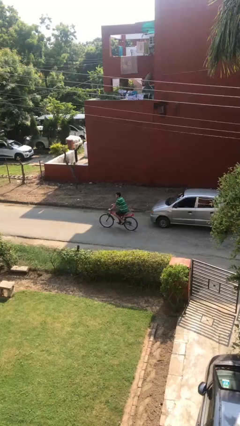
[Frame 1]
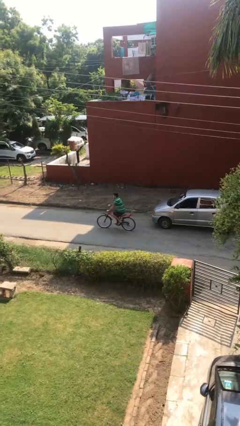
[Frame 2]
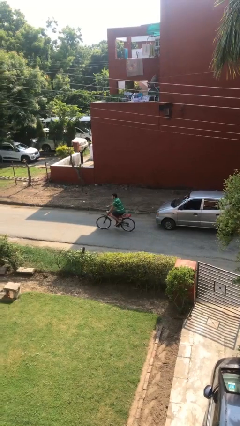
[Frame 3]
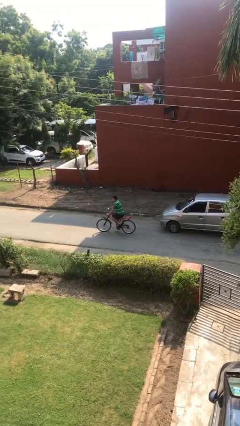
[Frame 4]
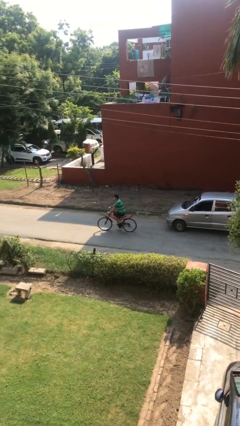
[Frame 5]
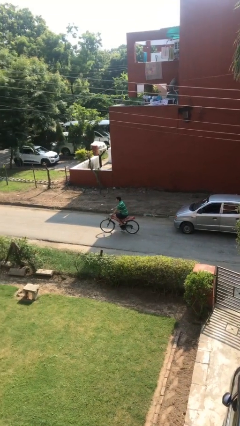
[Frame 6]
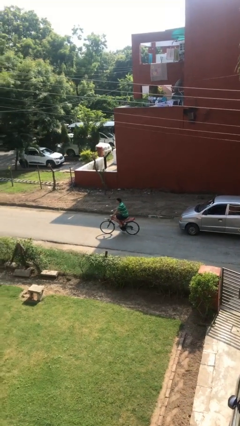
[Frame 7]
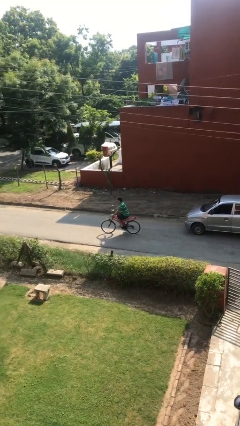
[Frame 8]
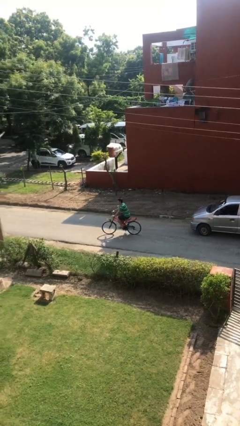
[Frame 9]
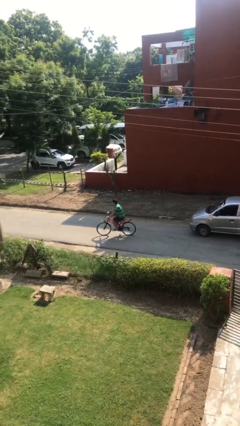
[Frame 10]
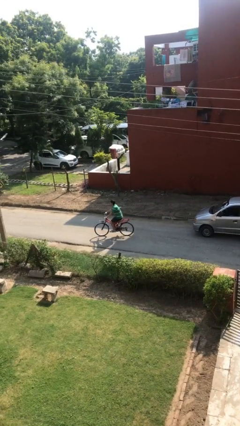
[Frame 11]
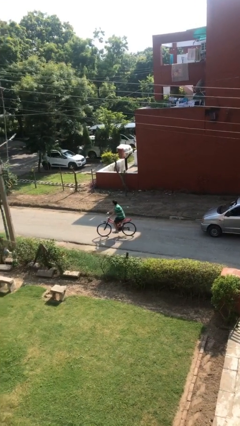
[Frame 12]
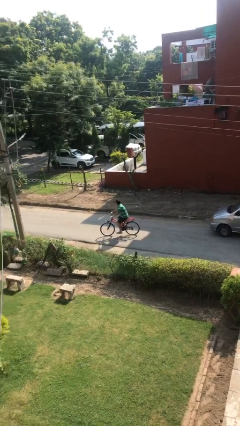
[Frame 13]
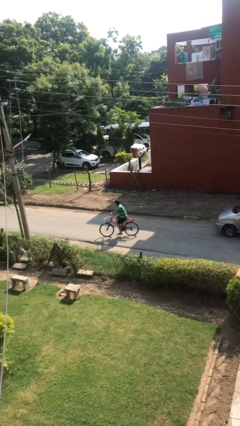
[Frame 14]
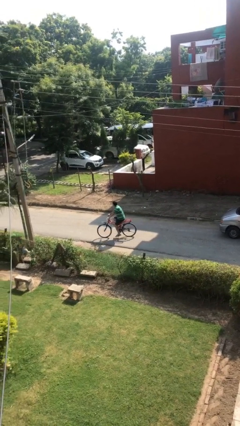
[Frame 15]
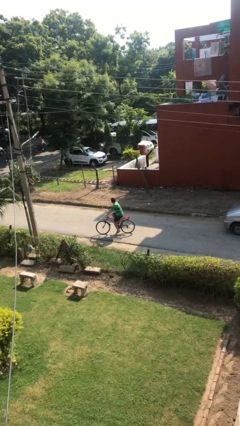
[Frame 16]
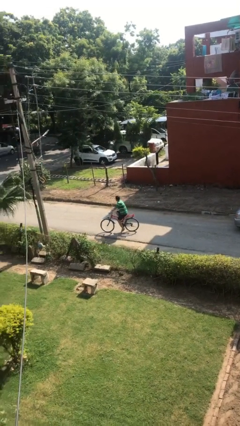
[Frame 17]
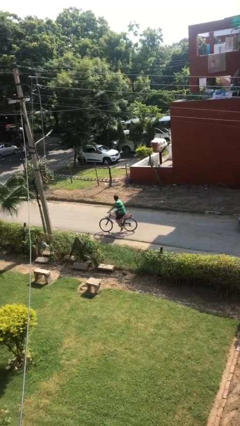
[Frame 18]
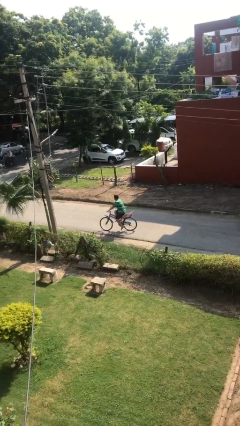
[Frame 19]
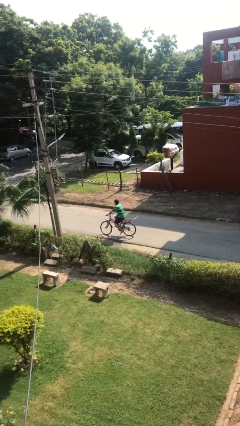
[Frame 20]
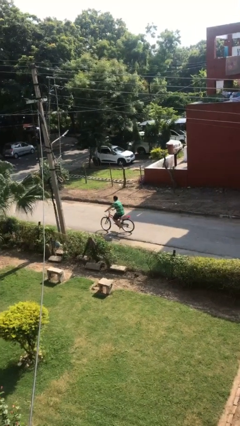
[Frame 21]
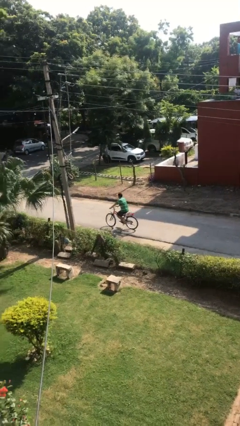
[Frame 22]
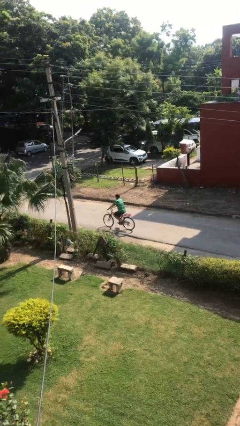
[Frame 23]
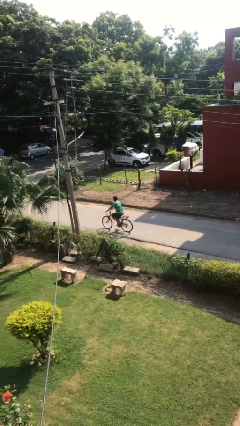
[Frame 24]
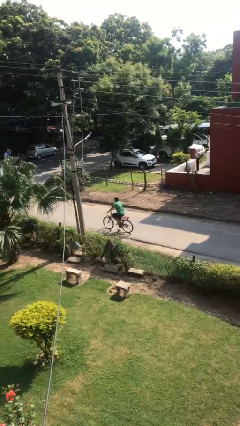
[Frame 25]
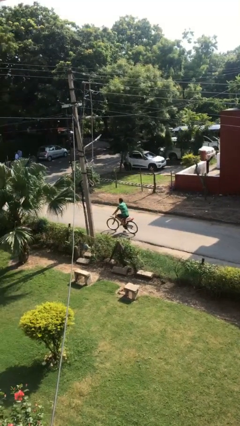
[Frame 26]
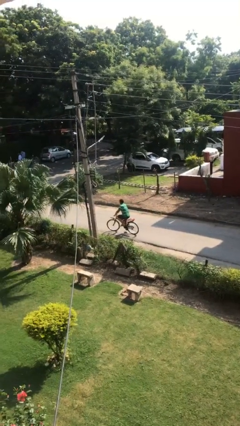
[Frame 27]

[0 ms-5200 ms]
person rides bicycle

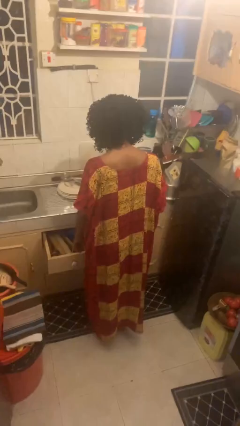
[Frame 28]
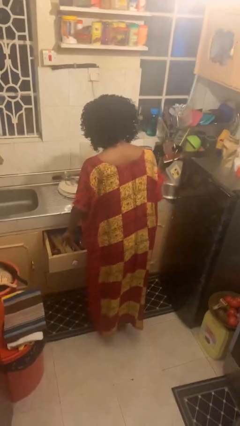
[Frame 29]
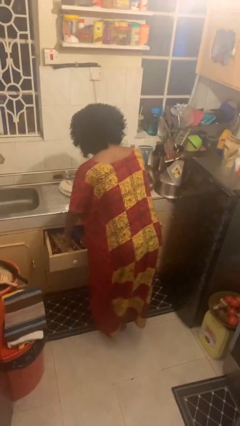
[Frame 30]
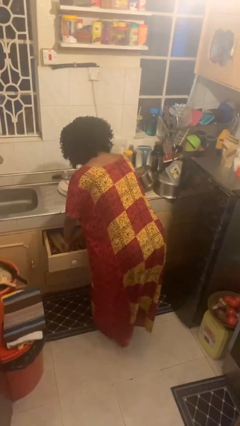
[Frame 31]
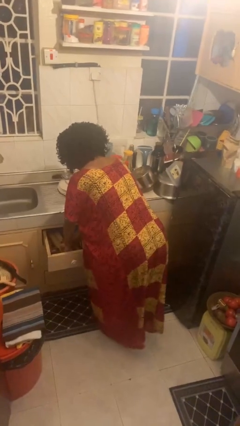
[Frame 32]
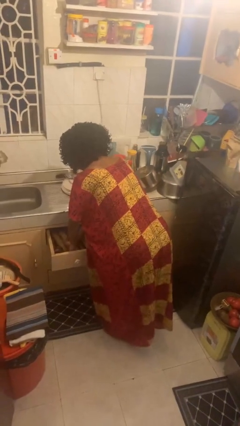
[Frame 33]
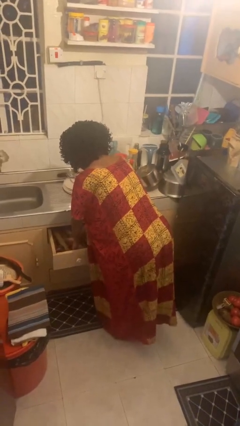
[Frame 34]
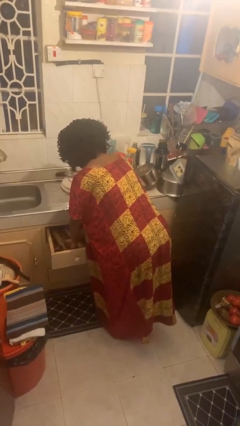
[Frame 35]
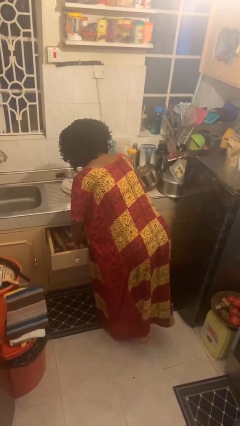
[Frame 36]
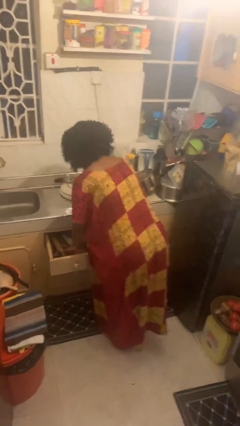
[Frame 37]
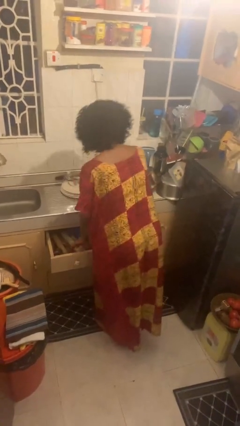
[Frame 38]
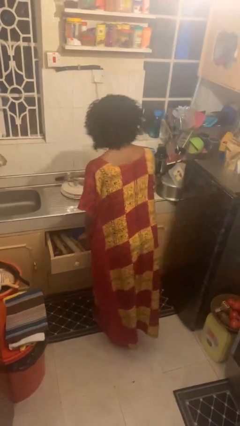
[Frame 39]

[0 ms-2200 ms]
person searches in kitchen drawer

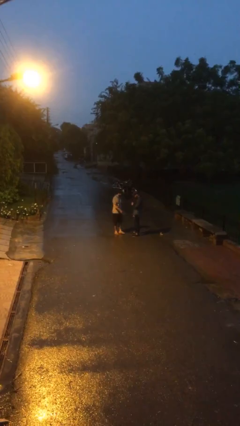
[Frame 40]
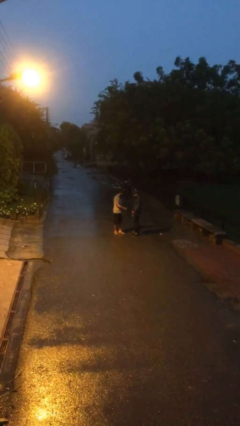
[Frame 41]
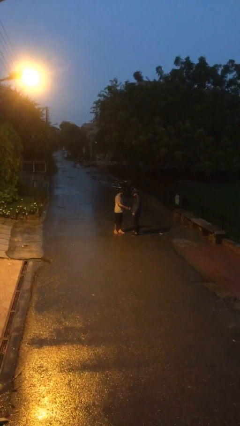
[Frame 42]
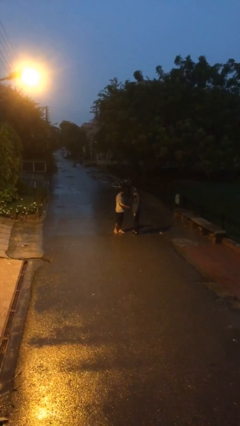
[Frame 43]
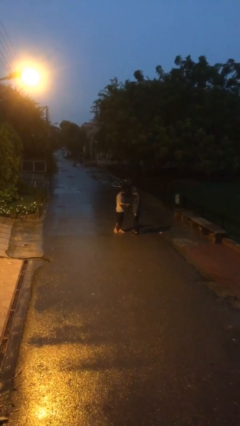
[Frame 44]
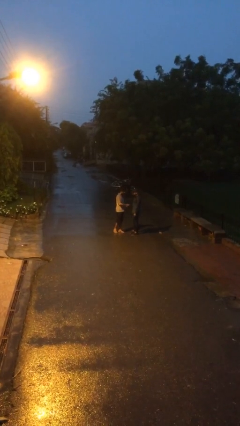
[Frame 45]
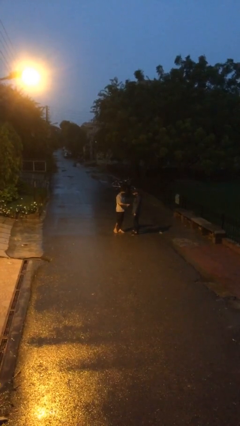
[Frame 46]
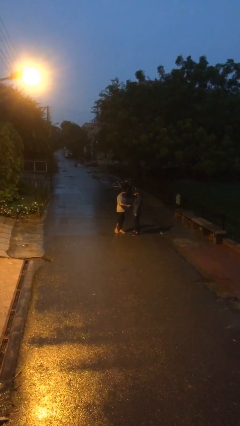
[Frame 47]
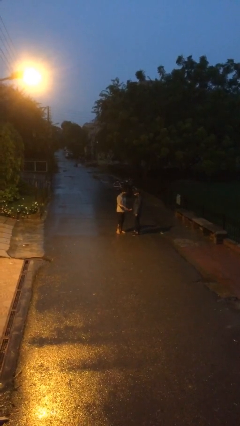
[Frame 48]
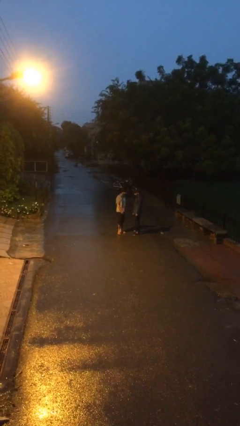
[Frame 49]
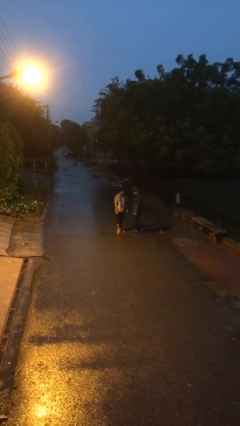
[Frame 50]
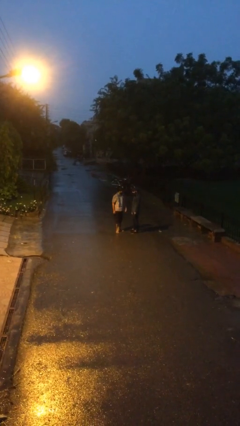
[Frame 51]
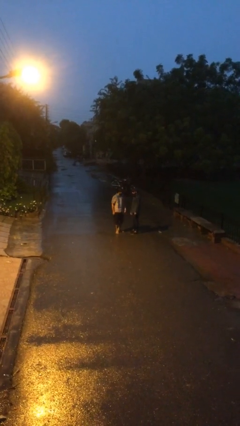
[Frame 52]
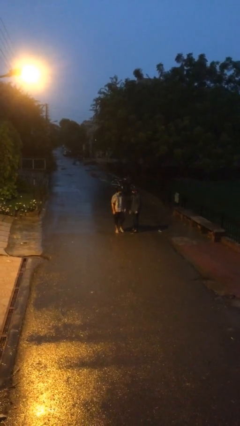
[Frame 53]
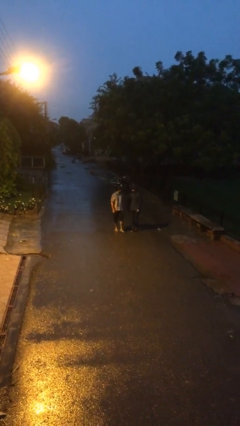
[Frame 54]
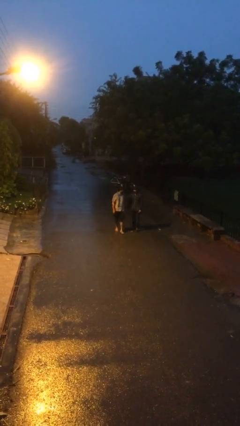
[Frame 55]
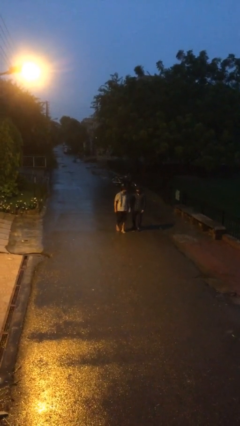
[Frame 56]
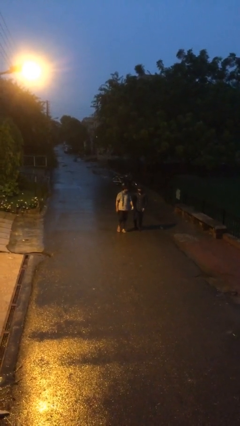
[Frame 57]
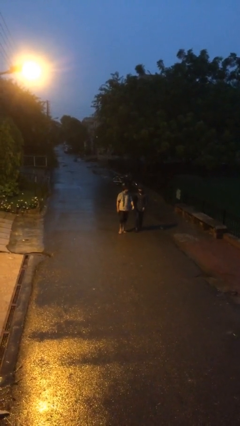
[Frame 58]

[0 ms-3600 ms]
person shakes hand

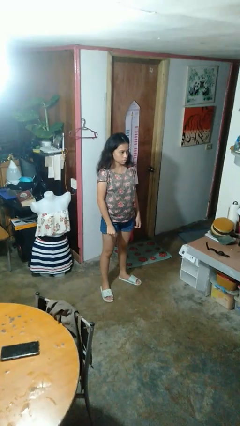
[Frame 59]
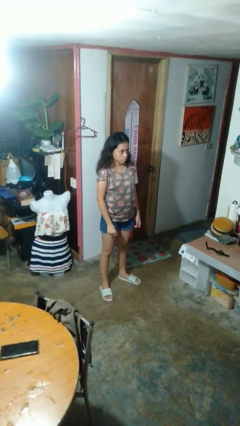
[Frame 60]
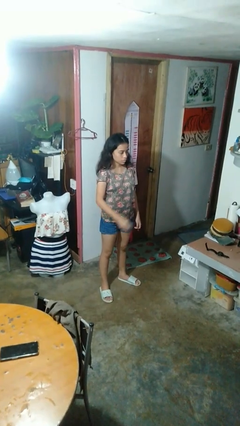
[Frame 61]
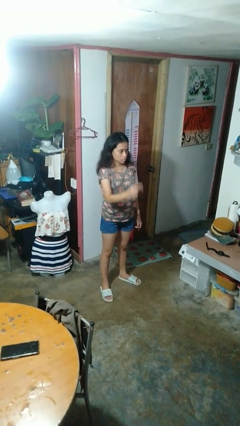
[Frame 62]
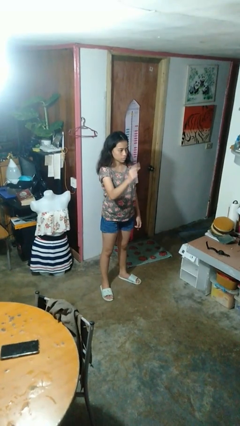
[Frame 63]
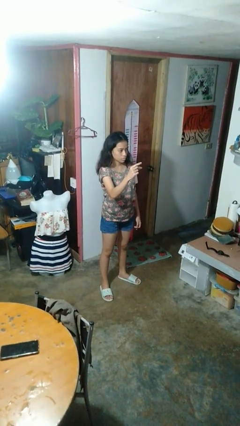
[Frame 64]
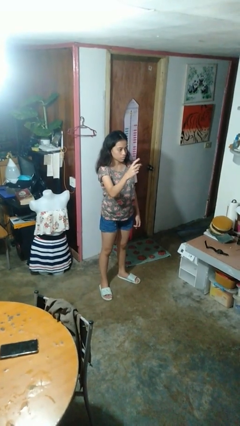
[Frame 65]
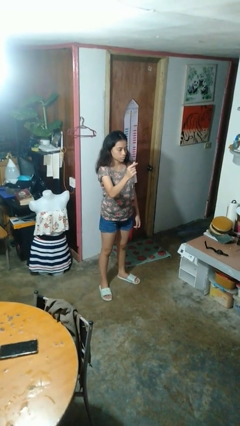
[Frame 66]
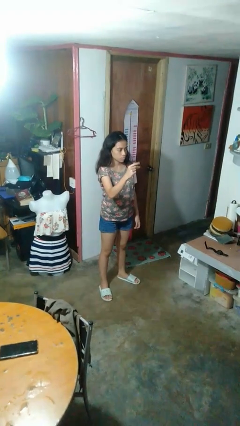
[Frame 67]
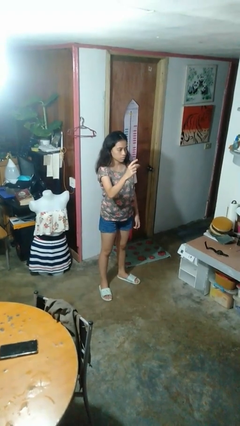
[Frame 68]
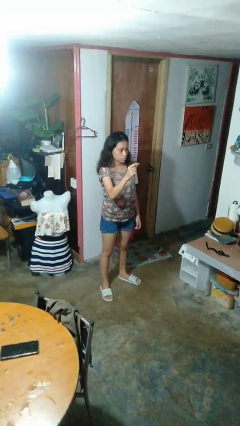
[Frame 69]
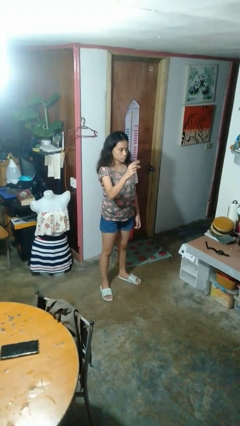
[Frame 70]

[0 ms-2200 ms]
person snaps fingers

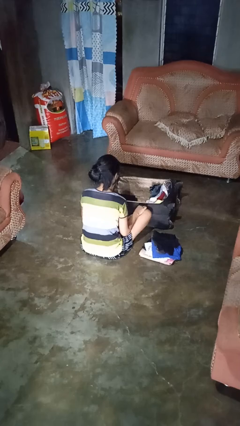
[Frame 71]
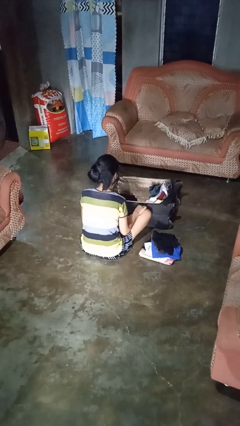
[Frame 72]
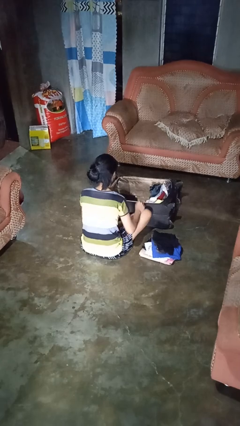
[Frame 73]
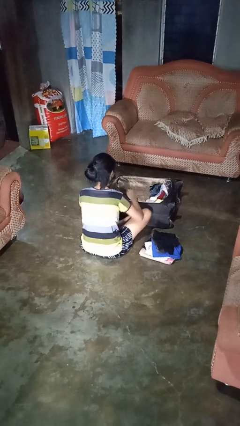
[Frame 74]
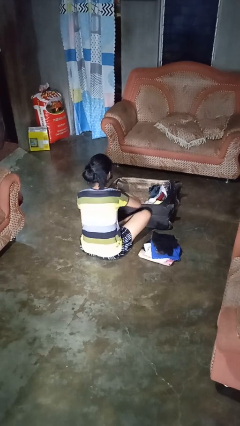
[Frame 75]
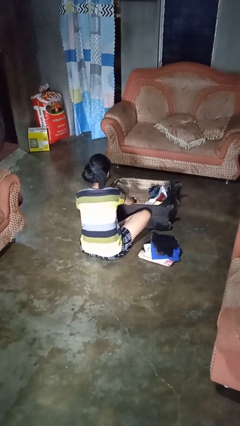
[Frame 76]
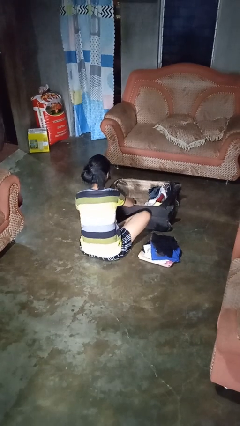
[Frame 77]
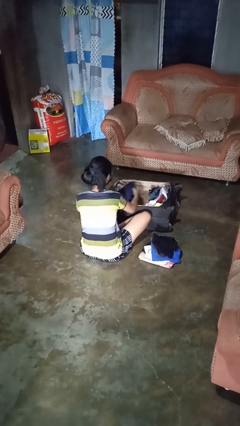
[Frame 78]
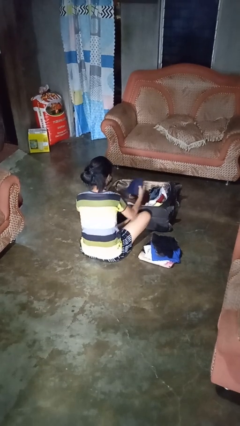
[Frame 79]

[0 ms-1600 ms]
person unloads clothes from suitcase

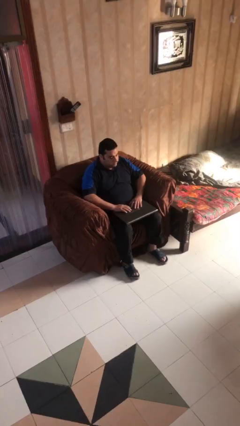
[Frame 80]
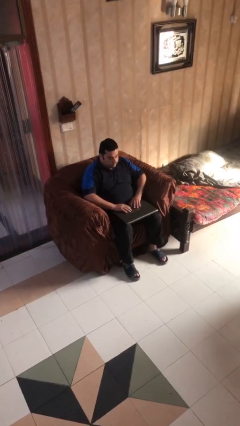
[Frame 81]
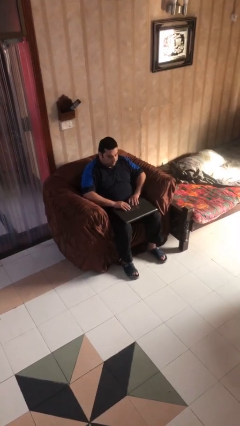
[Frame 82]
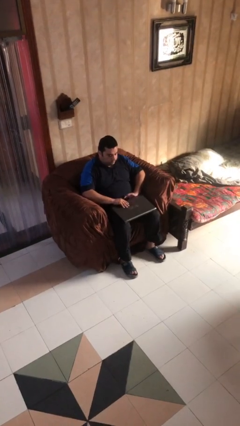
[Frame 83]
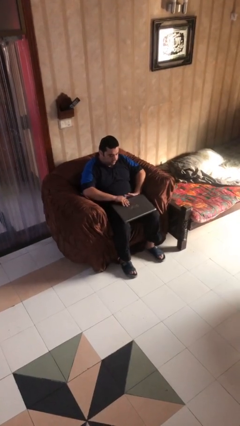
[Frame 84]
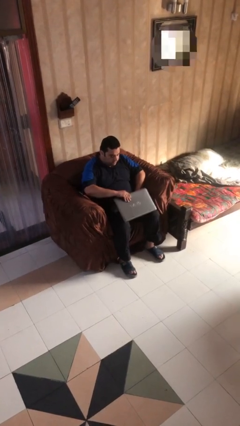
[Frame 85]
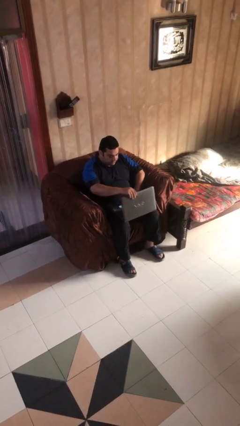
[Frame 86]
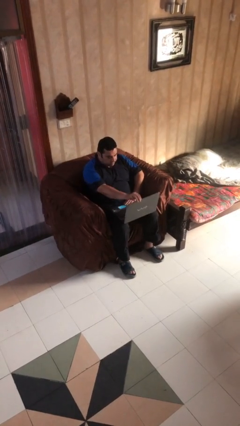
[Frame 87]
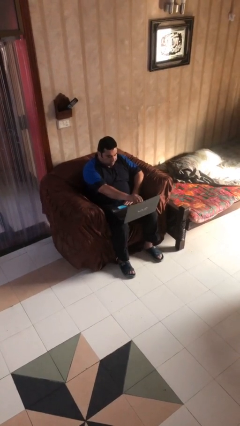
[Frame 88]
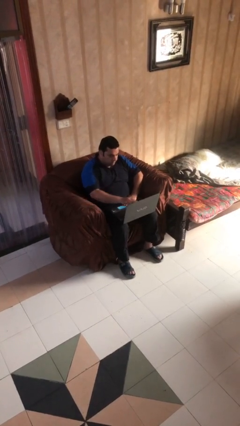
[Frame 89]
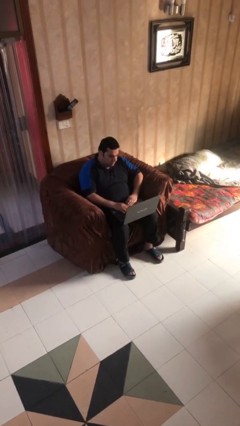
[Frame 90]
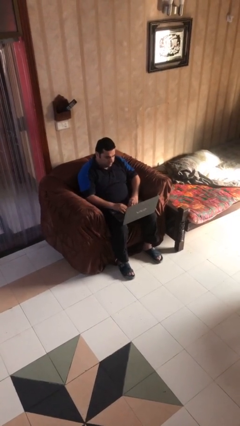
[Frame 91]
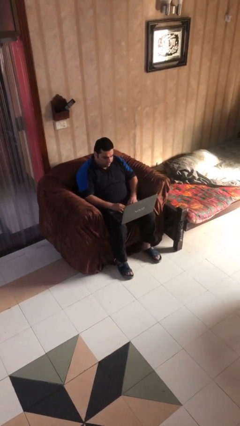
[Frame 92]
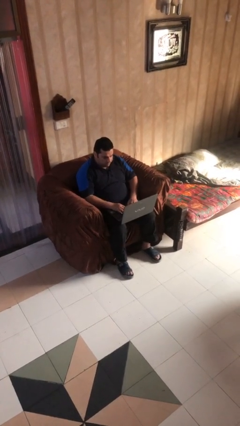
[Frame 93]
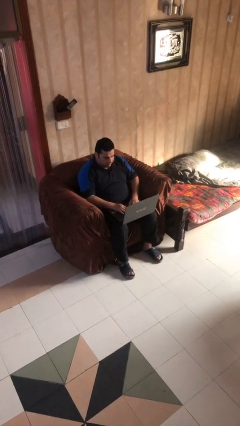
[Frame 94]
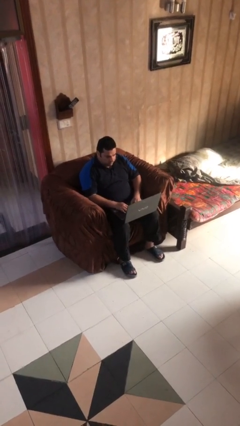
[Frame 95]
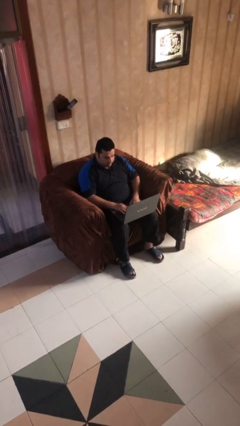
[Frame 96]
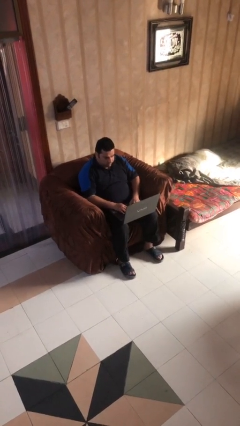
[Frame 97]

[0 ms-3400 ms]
person opens laptop
